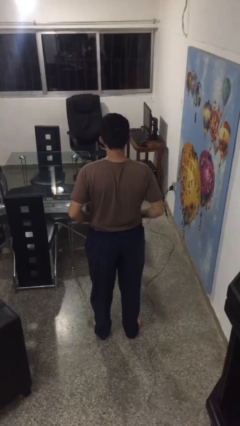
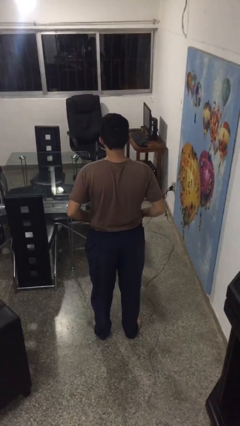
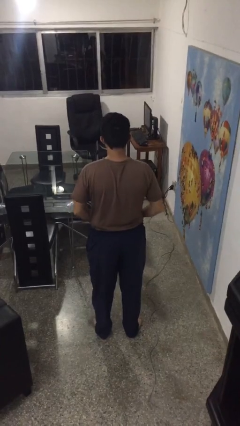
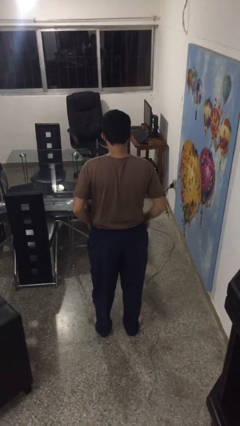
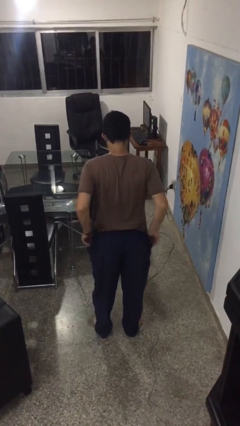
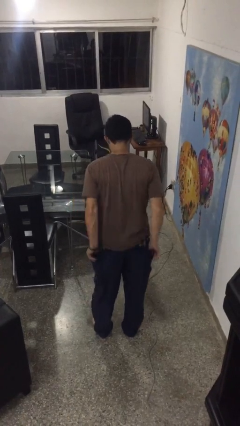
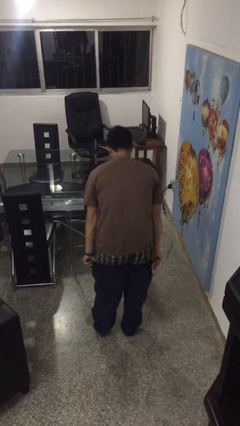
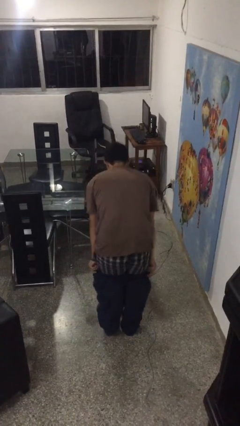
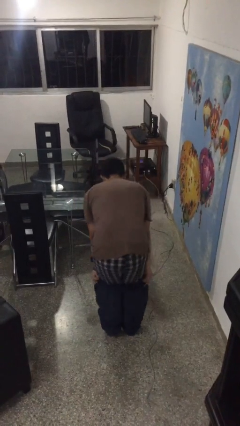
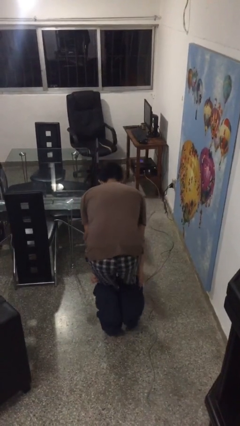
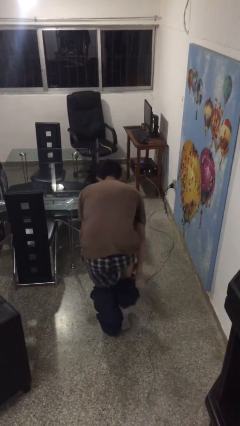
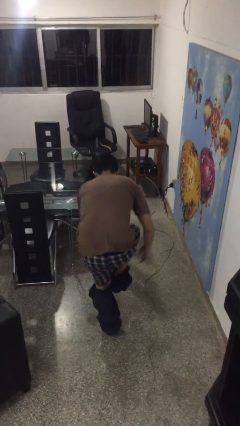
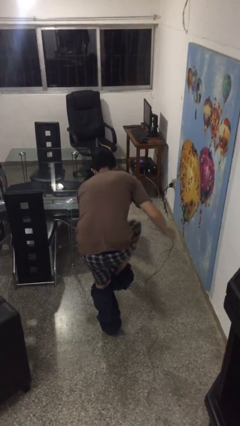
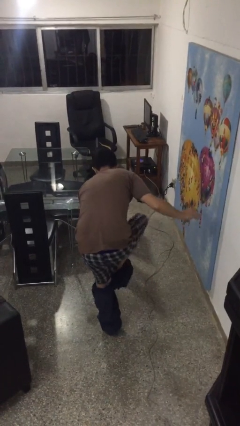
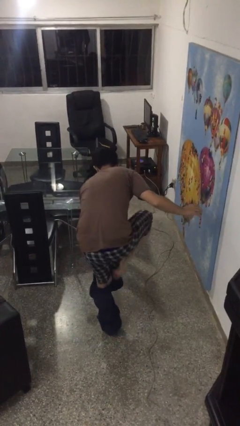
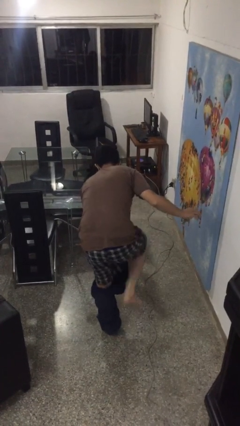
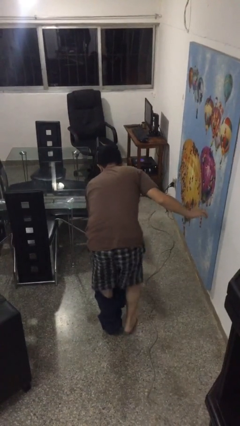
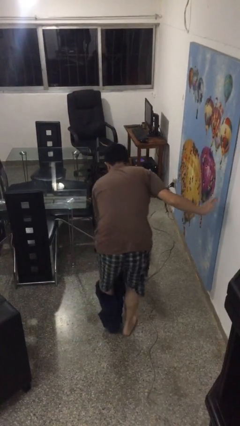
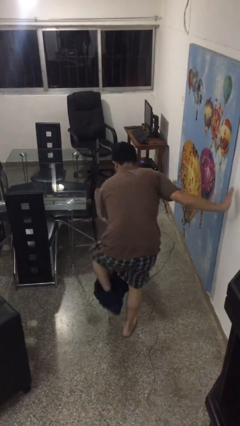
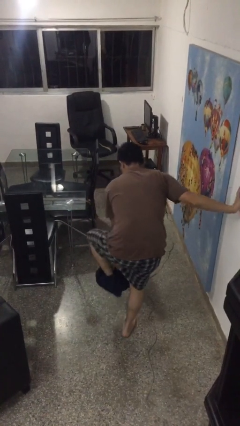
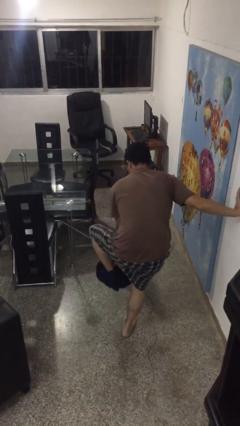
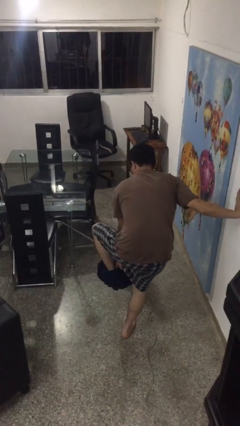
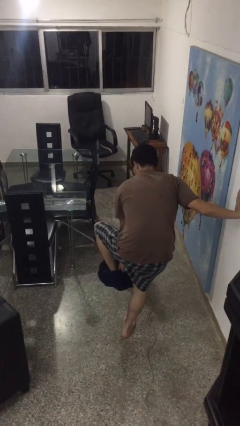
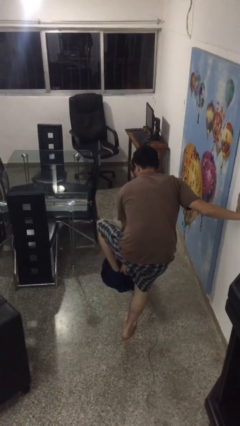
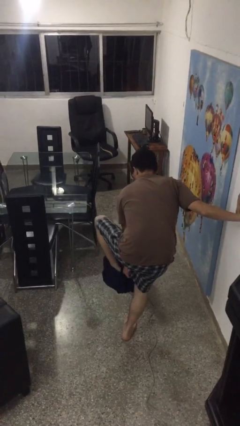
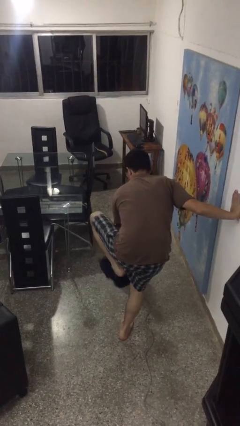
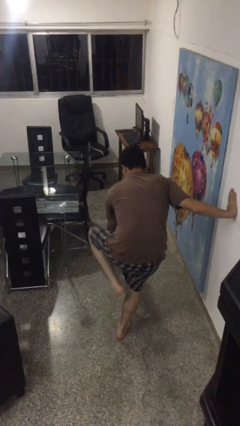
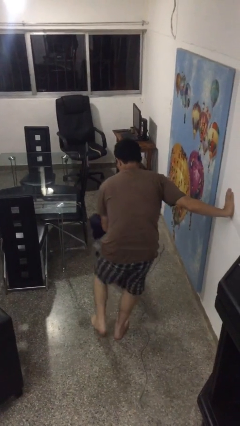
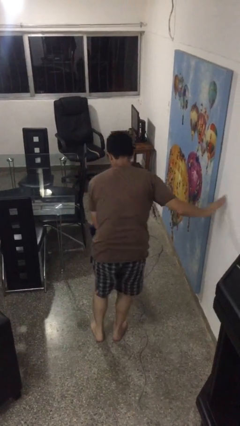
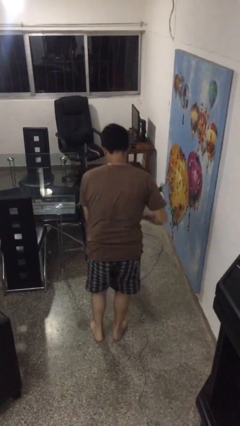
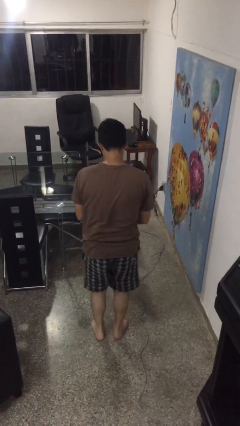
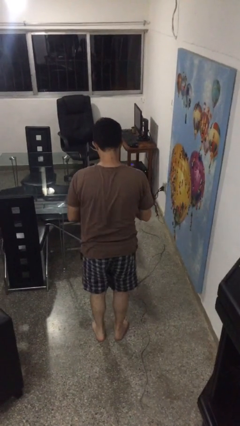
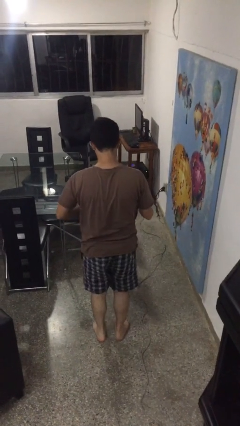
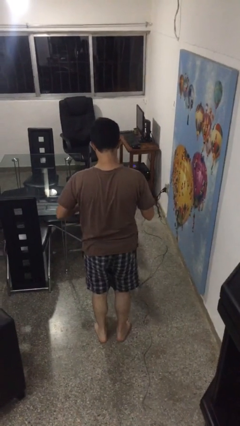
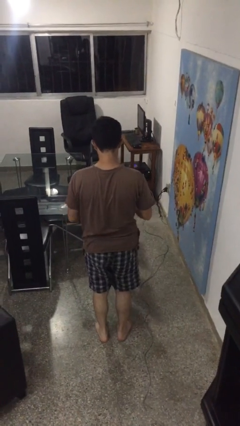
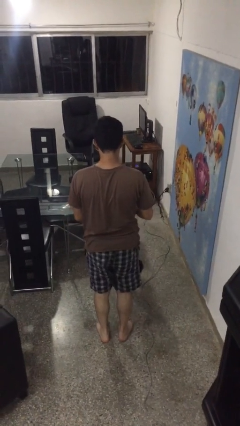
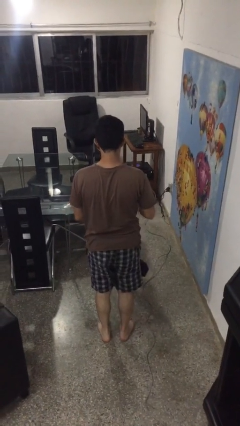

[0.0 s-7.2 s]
person takes off pants

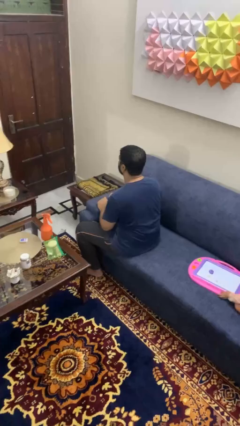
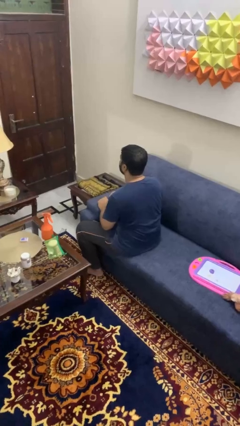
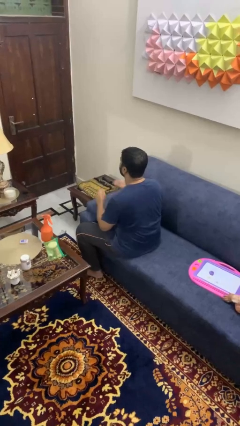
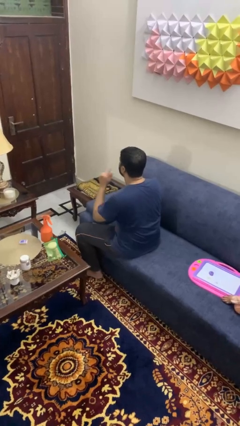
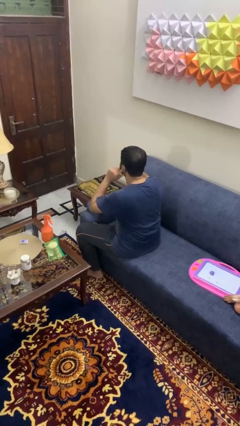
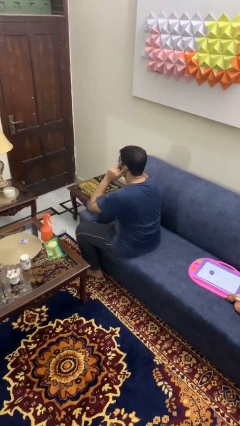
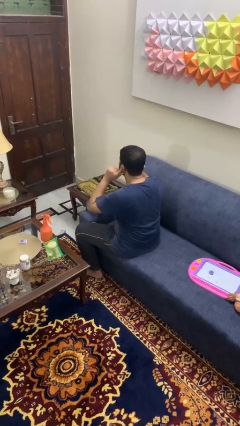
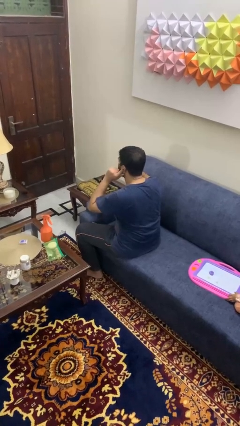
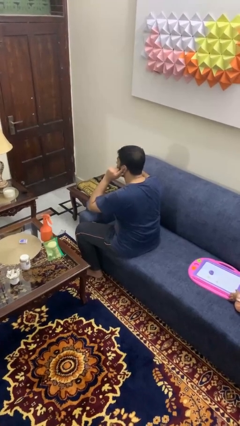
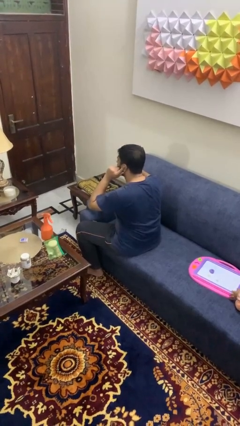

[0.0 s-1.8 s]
person puts fingers in ear

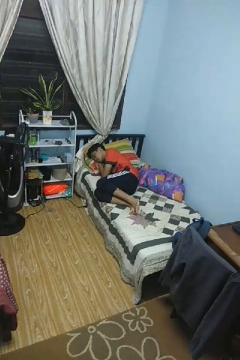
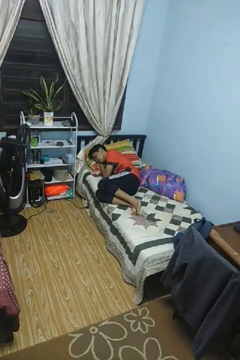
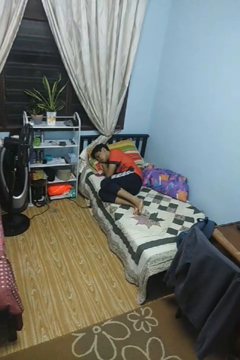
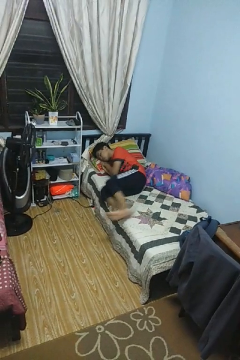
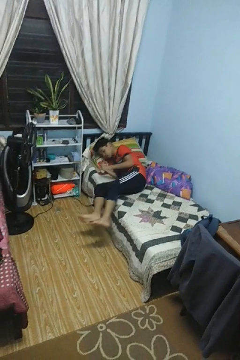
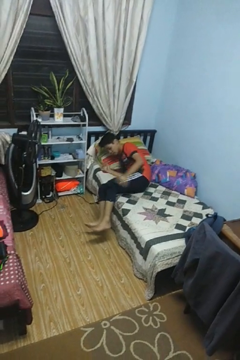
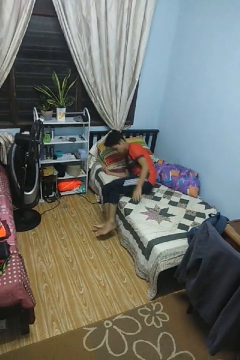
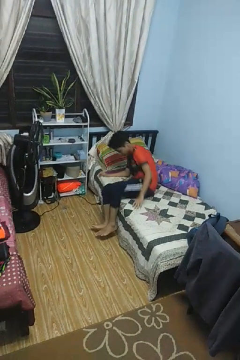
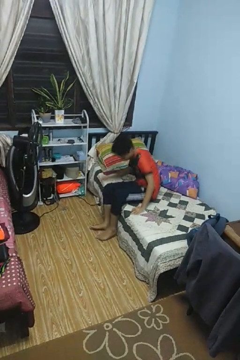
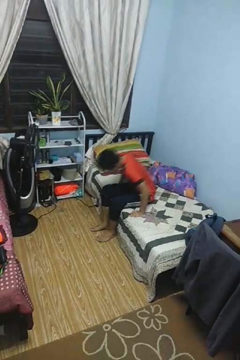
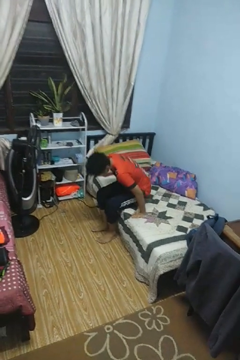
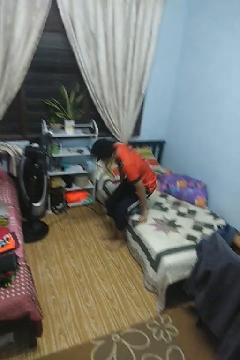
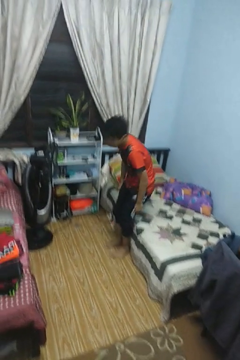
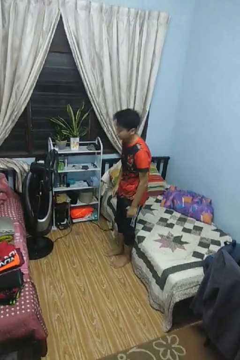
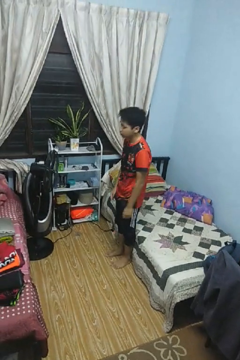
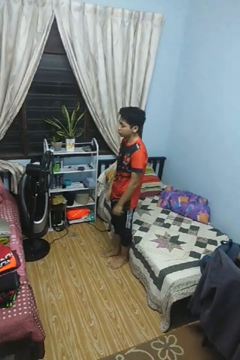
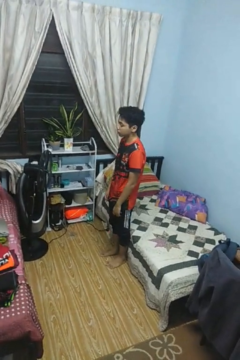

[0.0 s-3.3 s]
person stands up

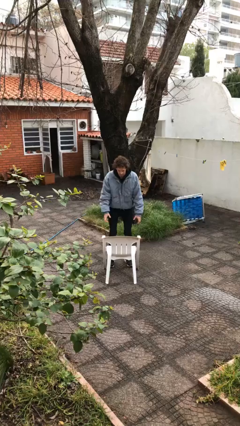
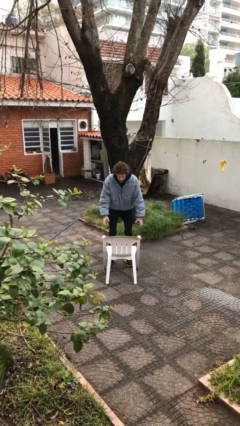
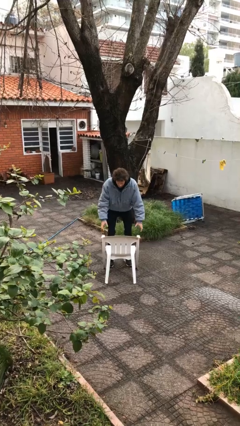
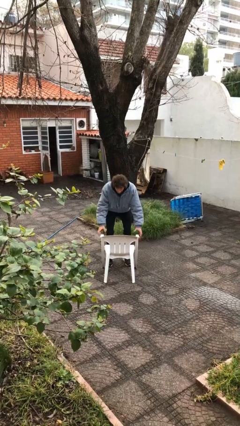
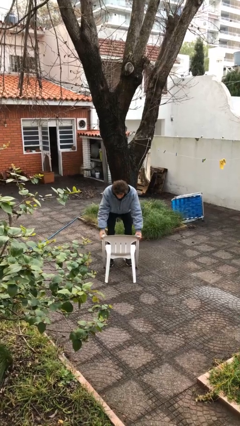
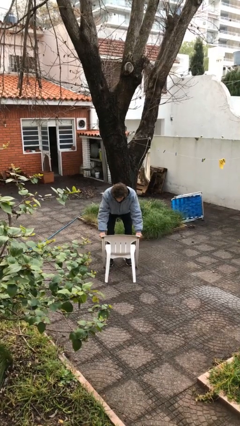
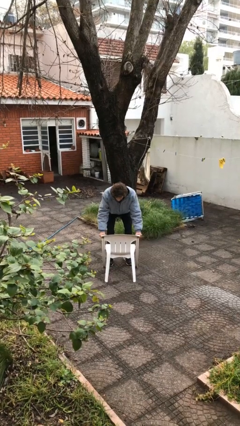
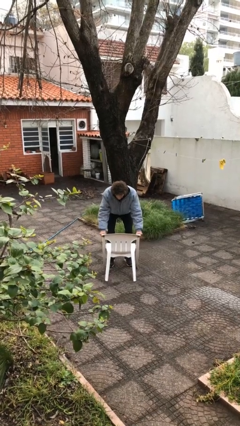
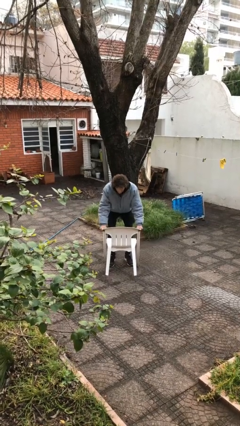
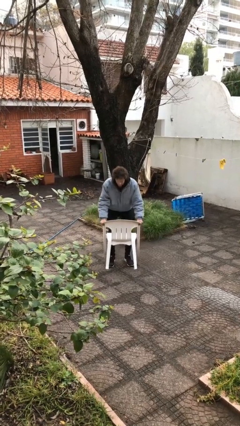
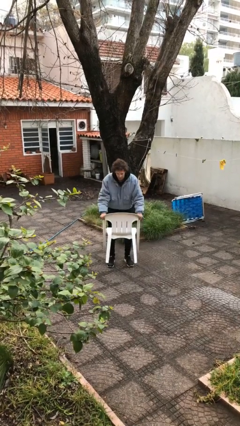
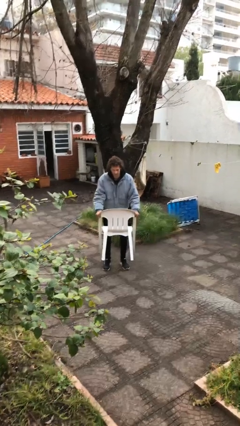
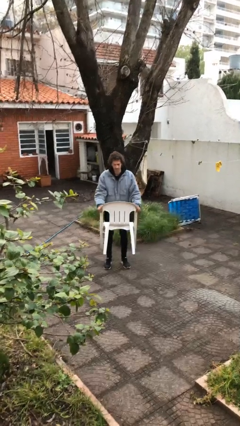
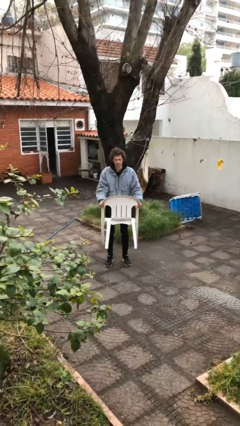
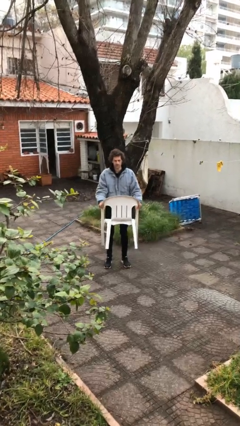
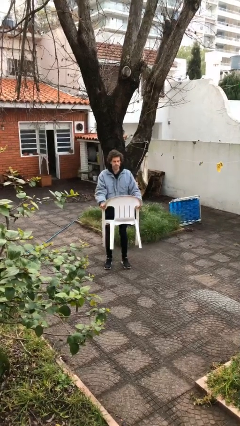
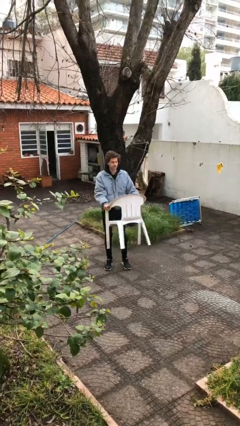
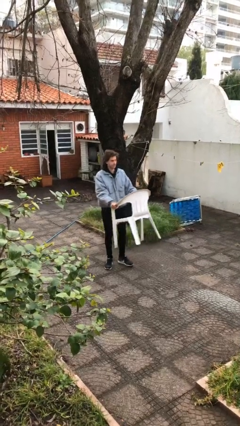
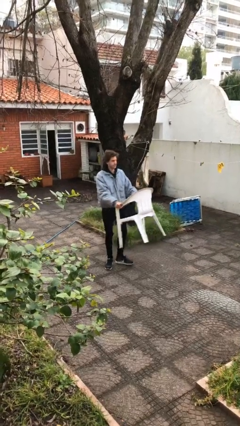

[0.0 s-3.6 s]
person picks up object from floor

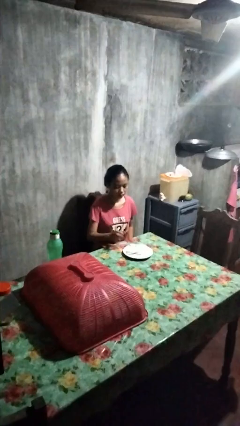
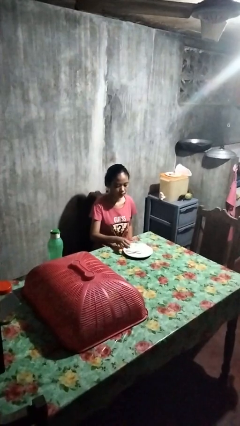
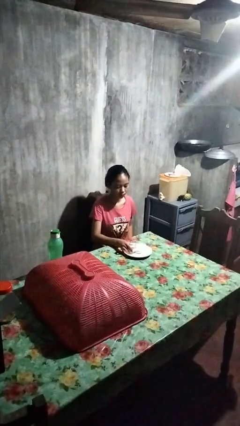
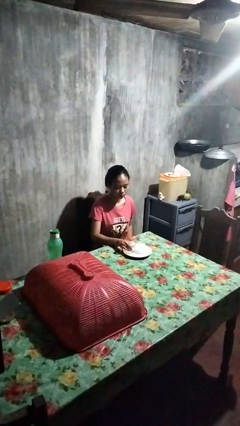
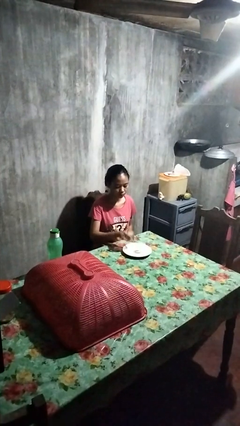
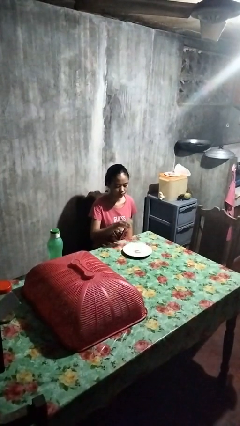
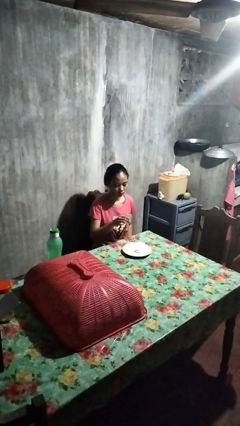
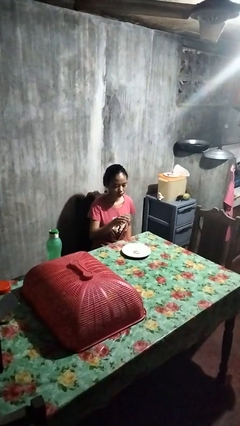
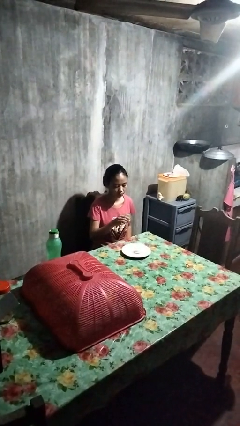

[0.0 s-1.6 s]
person picks up object from table

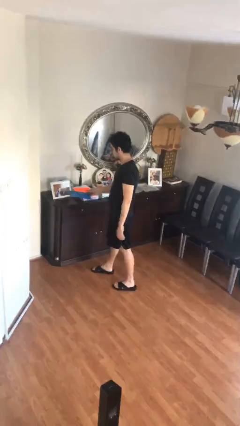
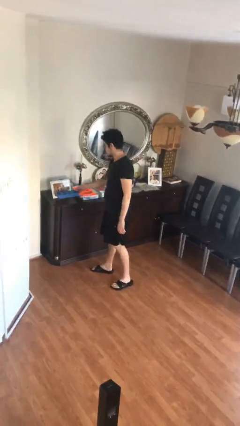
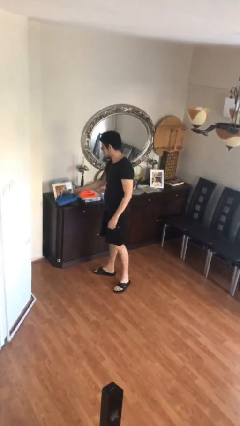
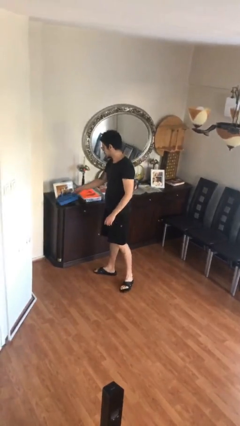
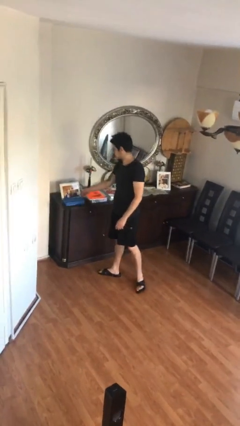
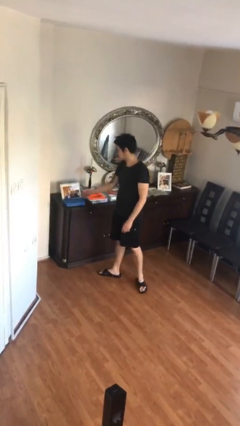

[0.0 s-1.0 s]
person puts down object on table
